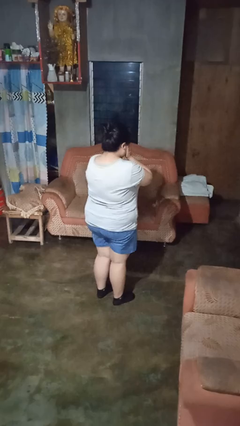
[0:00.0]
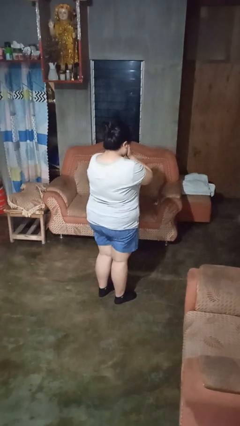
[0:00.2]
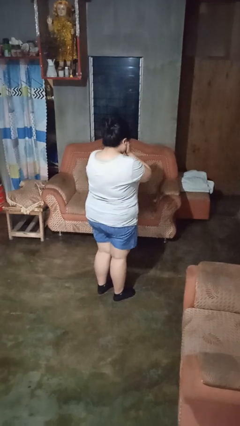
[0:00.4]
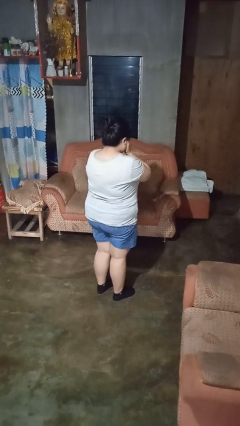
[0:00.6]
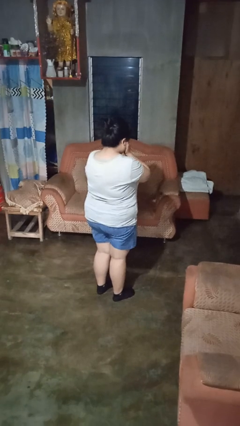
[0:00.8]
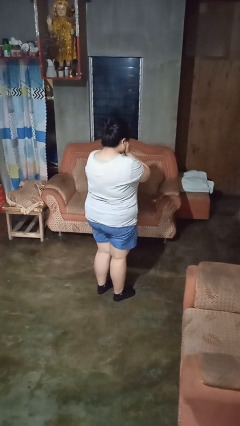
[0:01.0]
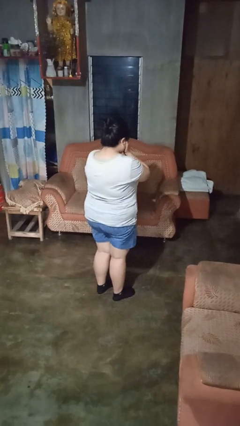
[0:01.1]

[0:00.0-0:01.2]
person covers face with hands

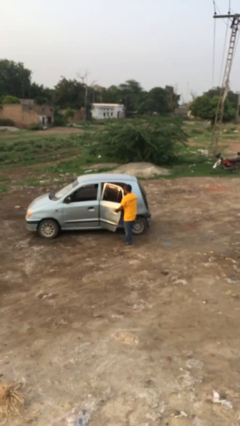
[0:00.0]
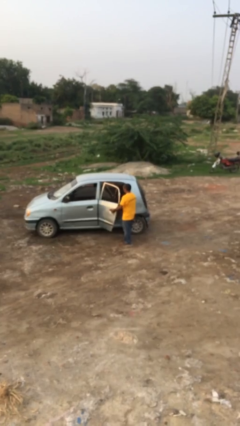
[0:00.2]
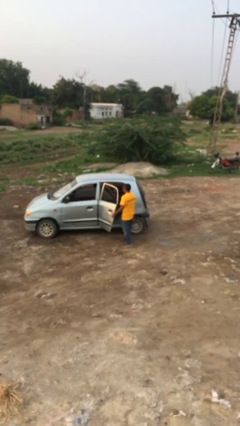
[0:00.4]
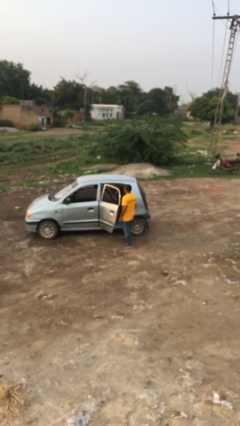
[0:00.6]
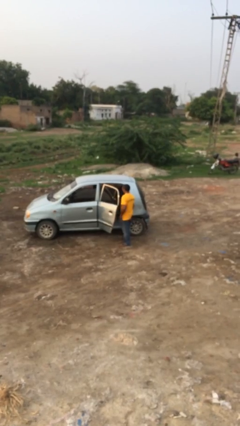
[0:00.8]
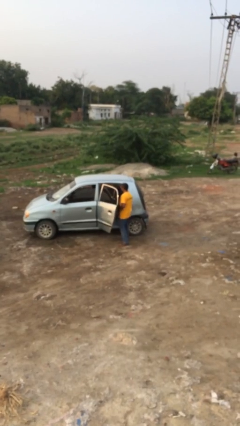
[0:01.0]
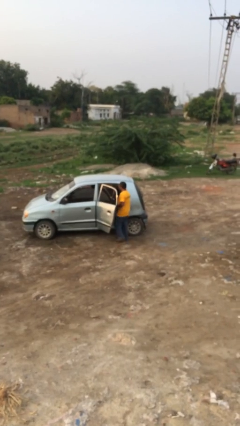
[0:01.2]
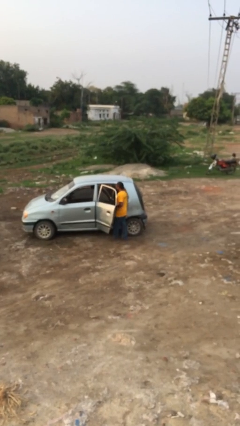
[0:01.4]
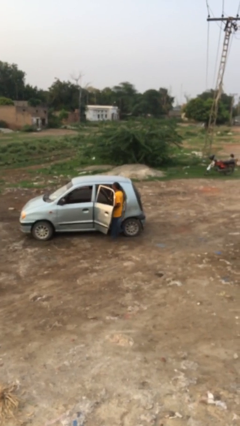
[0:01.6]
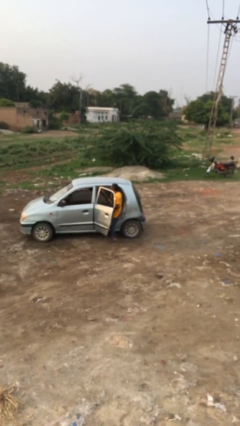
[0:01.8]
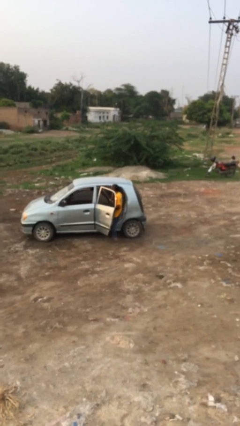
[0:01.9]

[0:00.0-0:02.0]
person enters car

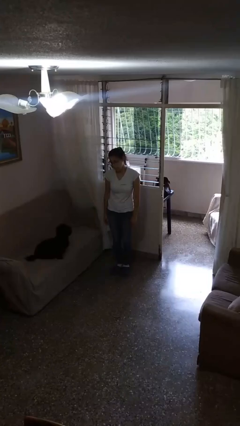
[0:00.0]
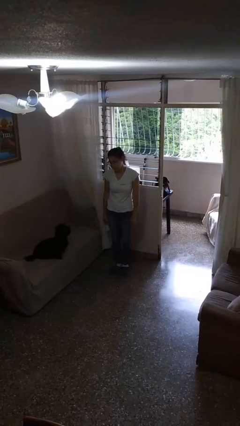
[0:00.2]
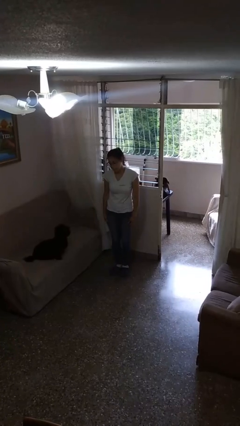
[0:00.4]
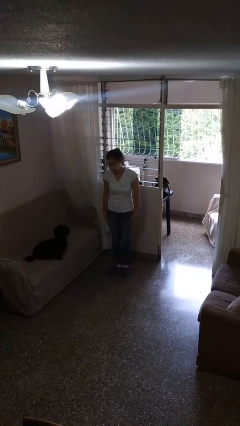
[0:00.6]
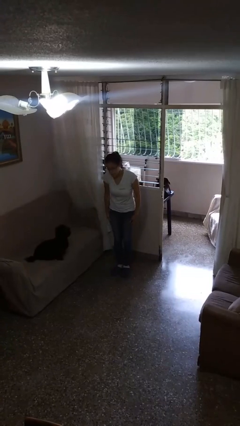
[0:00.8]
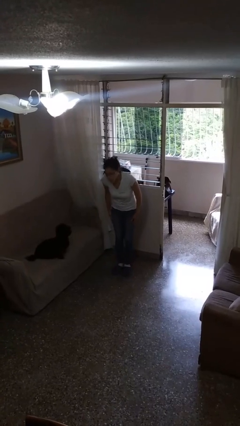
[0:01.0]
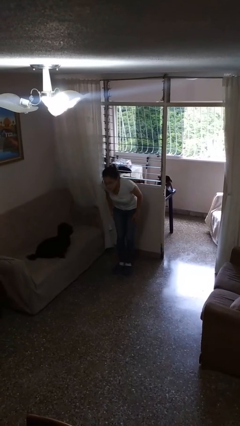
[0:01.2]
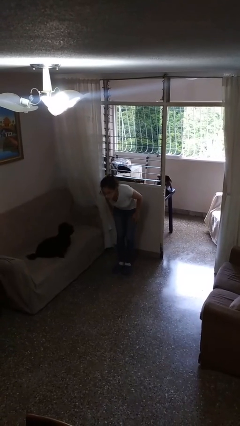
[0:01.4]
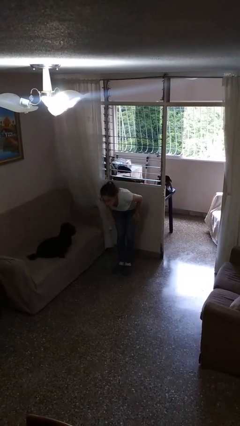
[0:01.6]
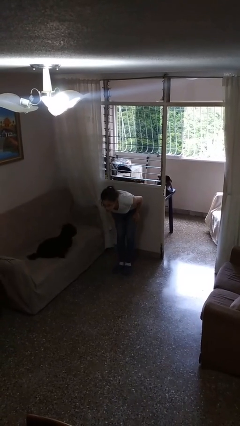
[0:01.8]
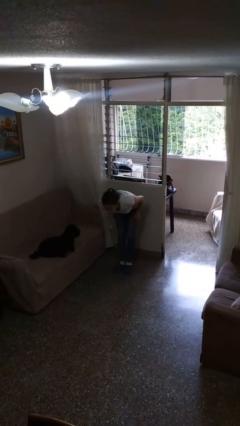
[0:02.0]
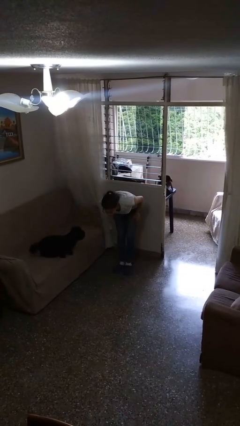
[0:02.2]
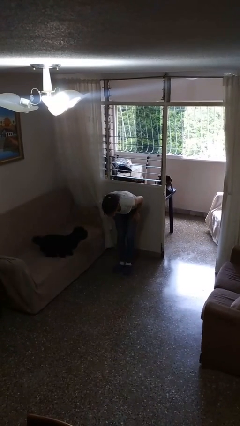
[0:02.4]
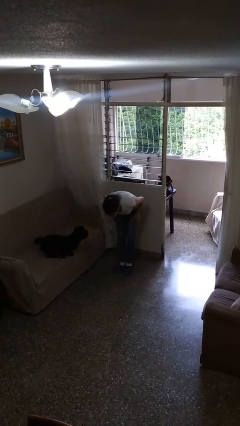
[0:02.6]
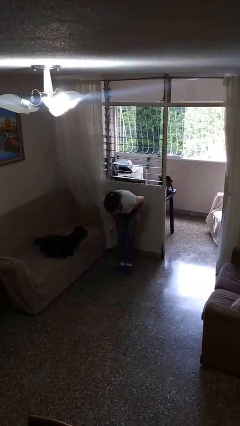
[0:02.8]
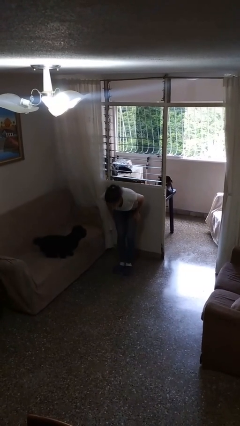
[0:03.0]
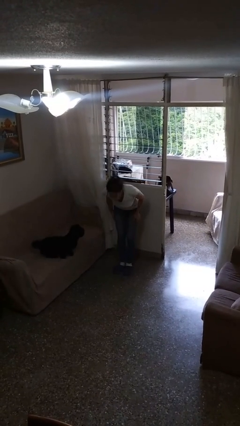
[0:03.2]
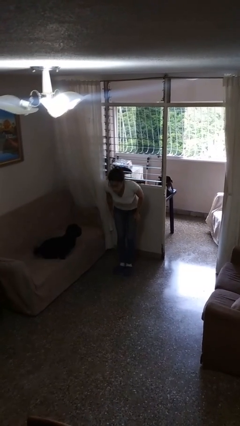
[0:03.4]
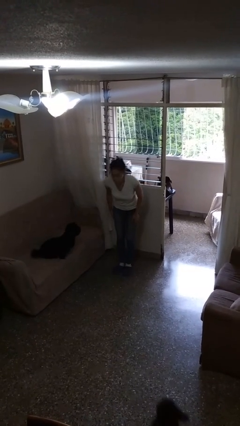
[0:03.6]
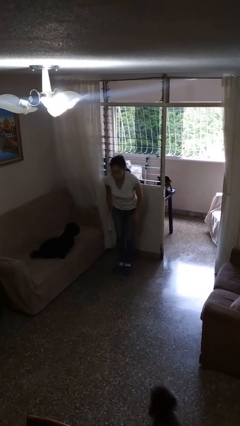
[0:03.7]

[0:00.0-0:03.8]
person bows

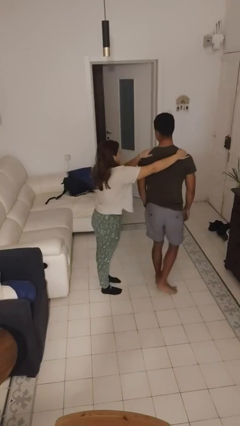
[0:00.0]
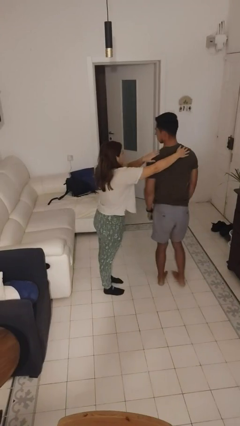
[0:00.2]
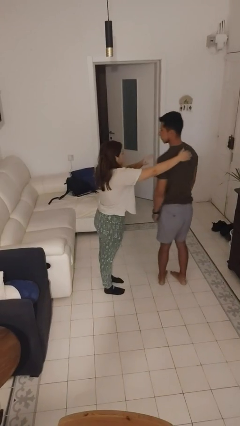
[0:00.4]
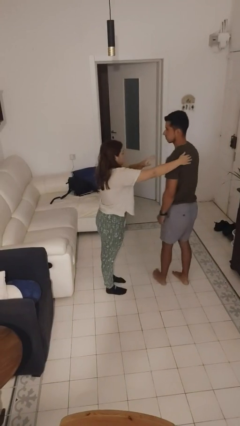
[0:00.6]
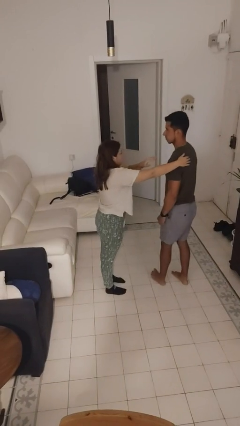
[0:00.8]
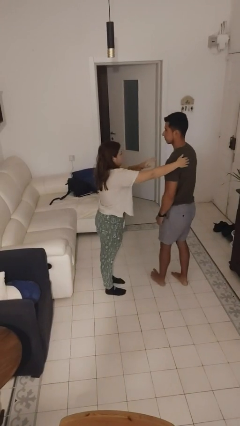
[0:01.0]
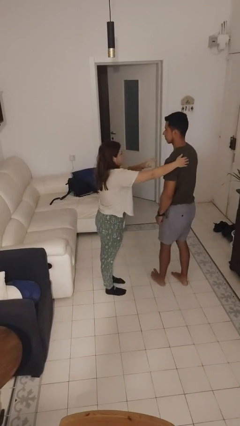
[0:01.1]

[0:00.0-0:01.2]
person spins person around

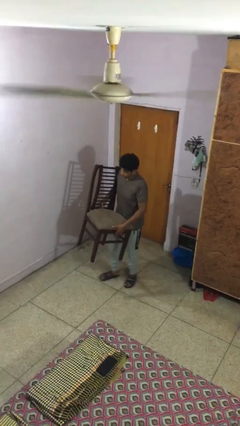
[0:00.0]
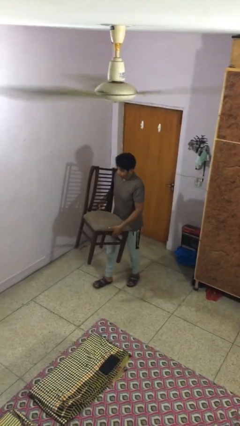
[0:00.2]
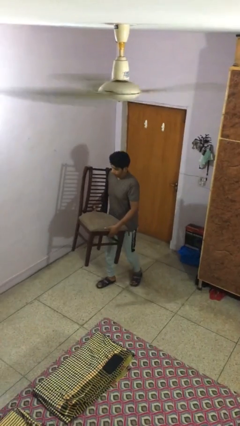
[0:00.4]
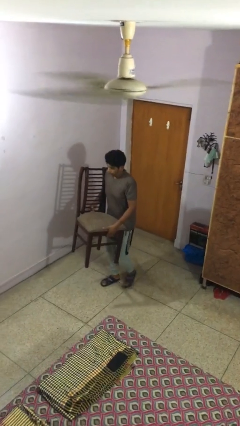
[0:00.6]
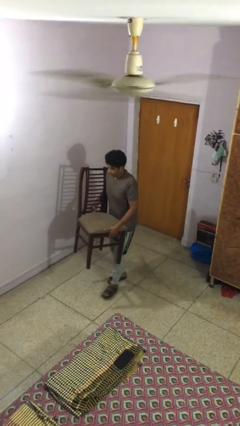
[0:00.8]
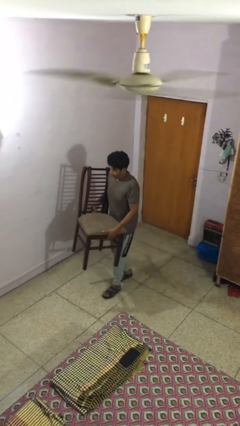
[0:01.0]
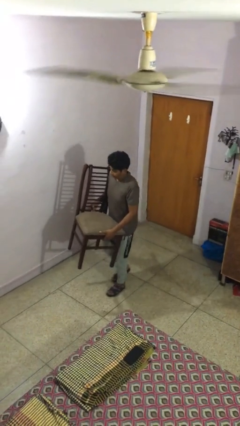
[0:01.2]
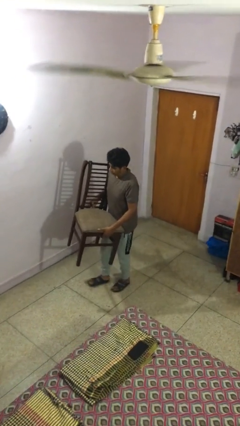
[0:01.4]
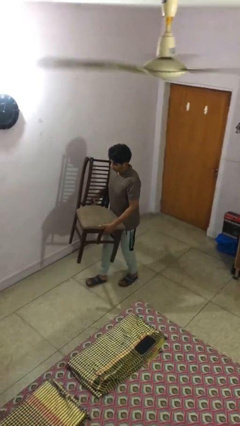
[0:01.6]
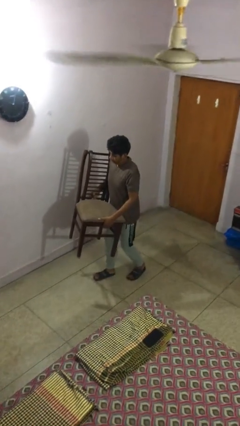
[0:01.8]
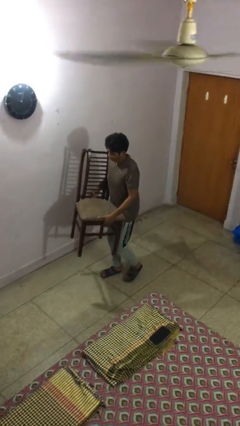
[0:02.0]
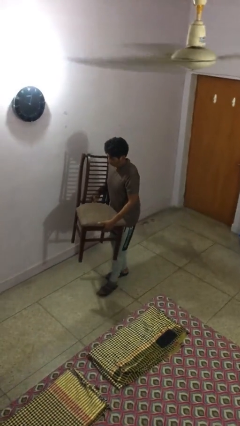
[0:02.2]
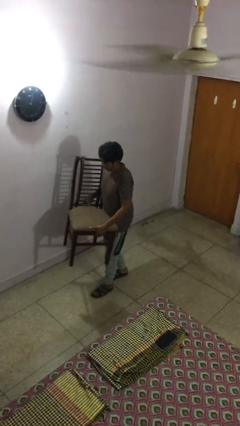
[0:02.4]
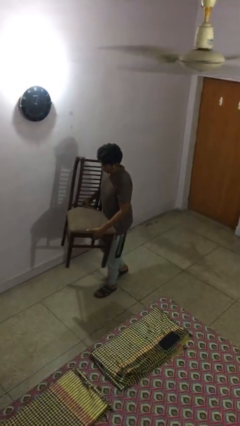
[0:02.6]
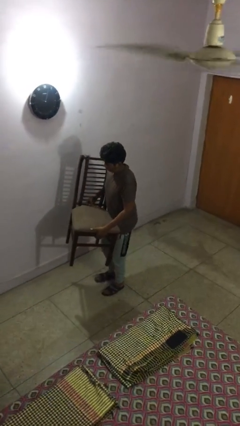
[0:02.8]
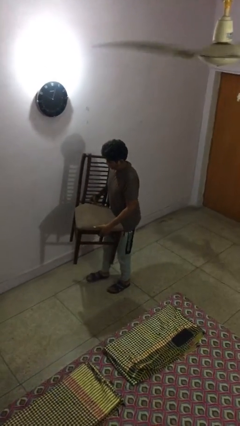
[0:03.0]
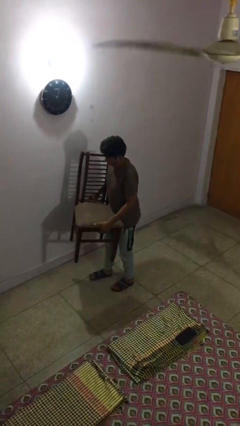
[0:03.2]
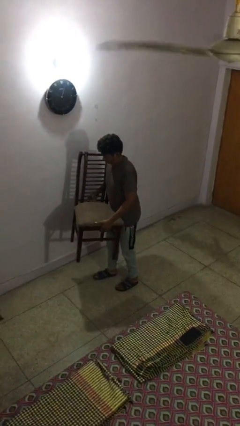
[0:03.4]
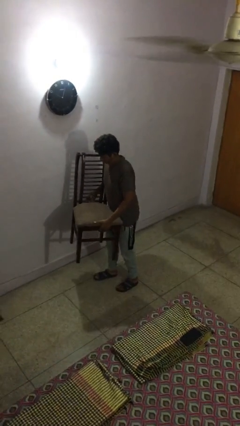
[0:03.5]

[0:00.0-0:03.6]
person carries heavy object

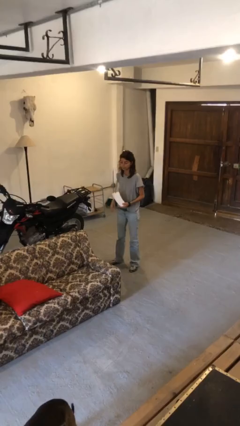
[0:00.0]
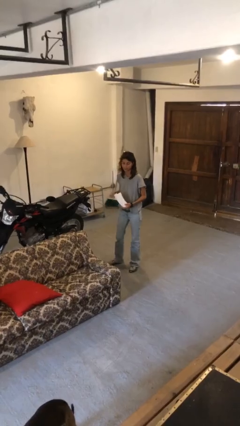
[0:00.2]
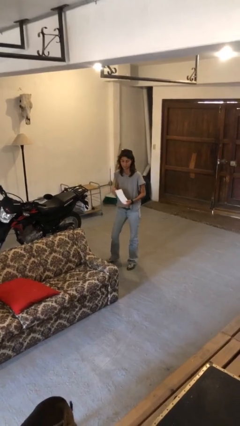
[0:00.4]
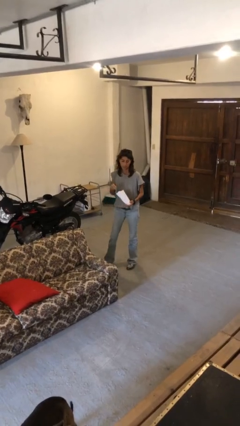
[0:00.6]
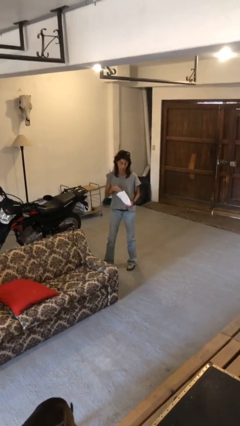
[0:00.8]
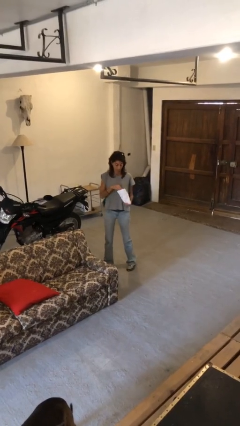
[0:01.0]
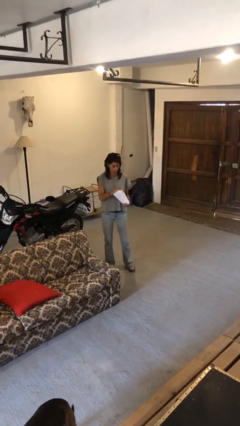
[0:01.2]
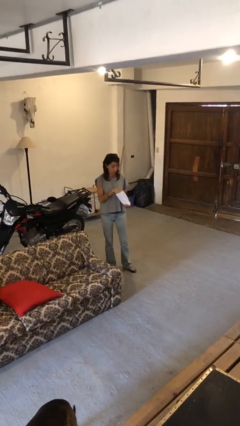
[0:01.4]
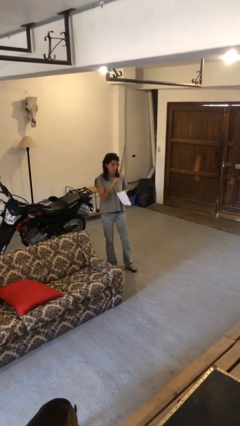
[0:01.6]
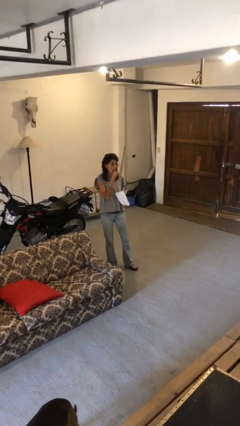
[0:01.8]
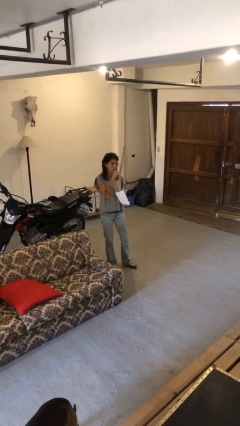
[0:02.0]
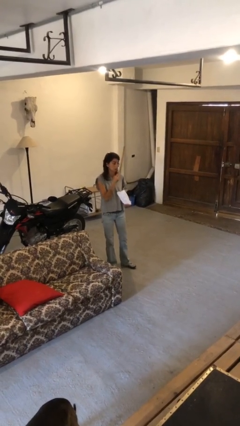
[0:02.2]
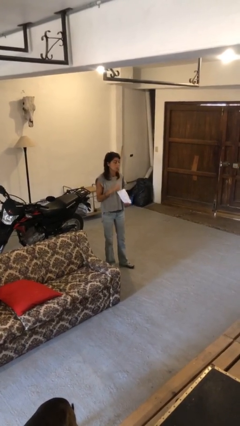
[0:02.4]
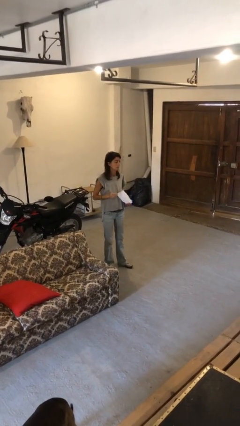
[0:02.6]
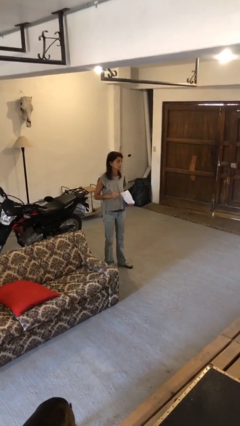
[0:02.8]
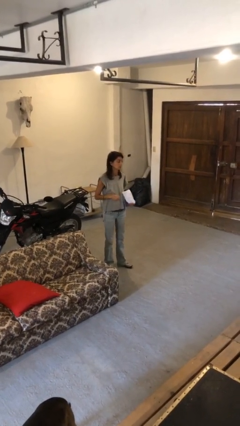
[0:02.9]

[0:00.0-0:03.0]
person eats snack from bag

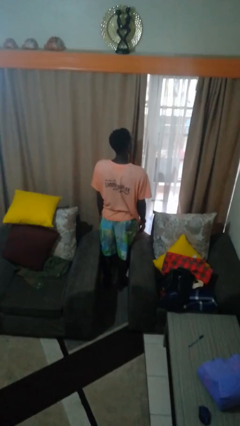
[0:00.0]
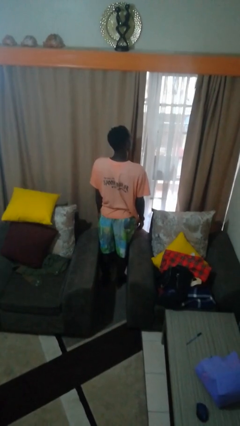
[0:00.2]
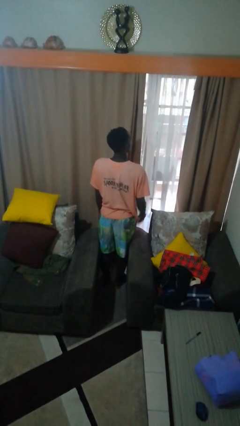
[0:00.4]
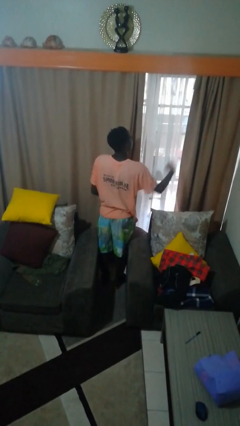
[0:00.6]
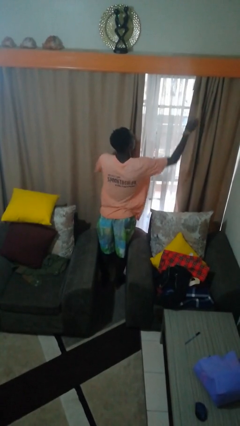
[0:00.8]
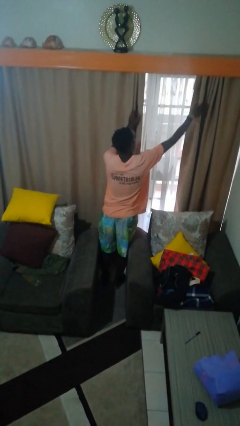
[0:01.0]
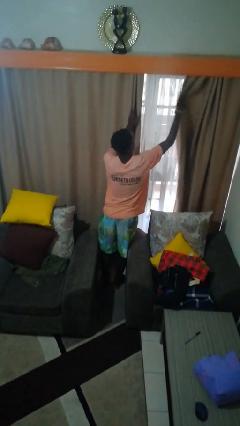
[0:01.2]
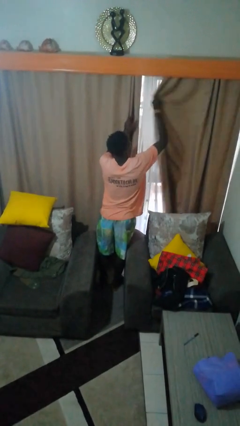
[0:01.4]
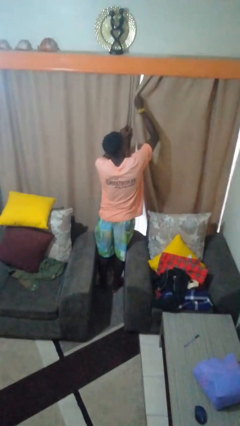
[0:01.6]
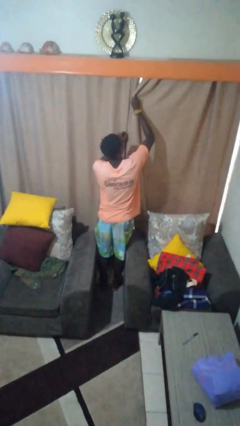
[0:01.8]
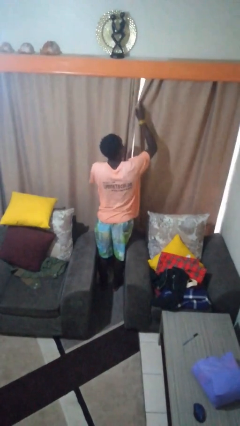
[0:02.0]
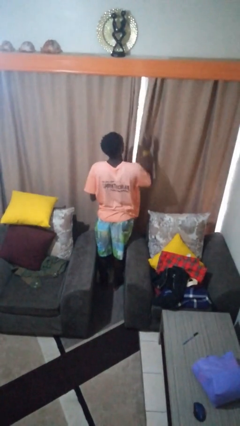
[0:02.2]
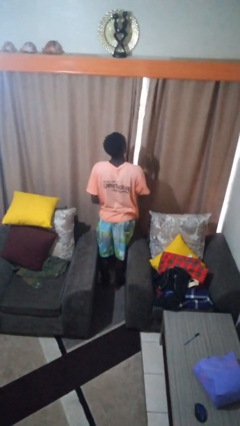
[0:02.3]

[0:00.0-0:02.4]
person closes curtains
